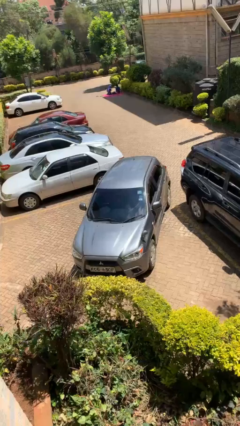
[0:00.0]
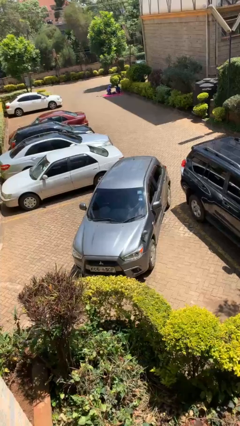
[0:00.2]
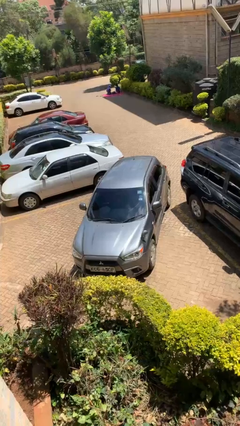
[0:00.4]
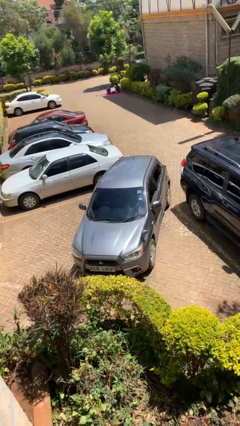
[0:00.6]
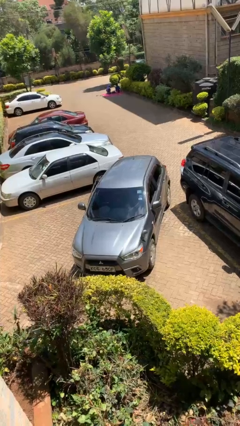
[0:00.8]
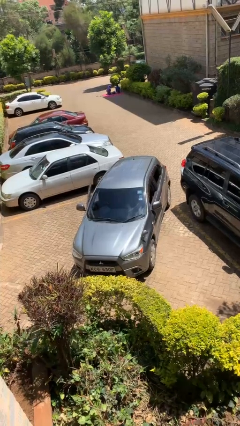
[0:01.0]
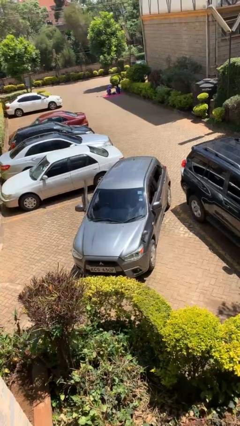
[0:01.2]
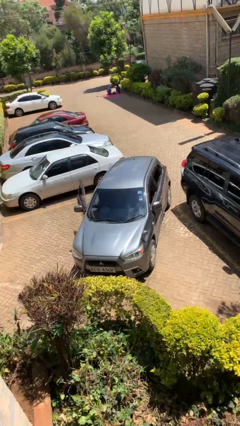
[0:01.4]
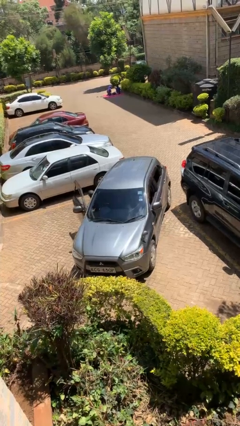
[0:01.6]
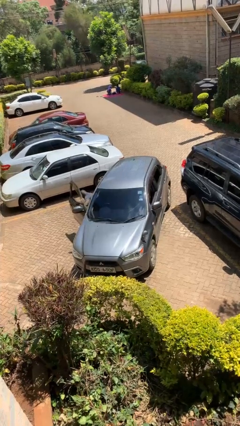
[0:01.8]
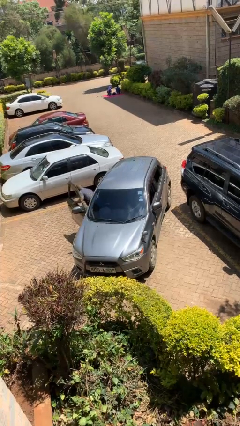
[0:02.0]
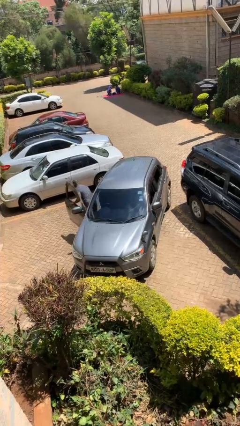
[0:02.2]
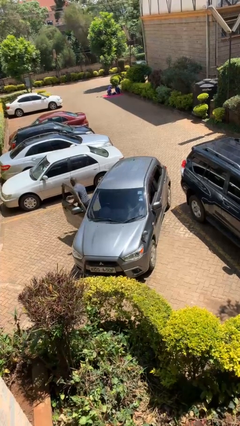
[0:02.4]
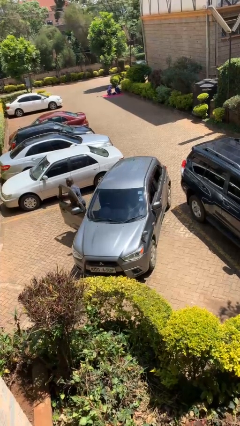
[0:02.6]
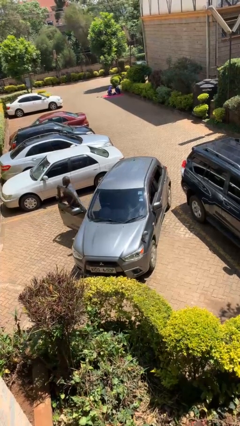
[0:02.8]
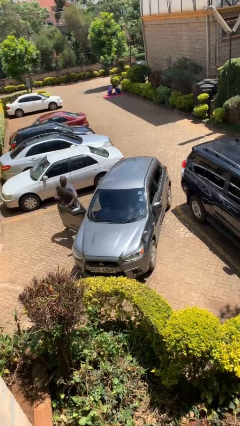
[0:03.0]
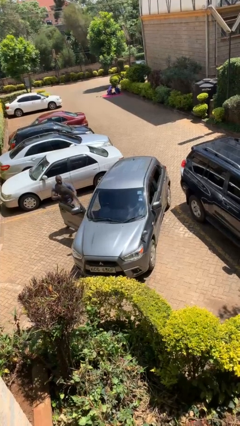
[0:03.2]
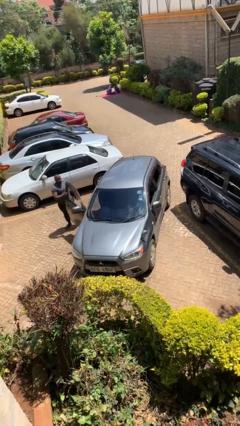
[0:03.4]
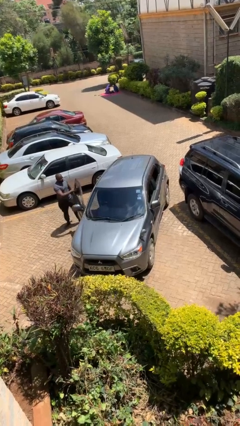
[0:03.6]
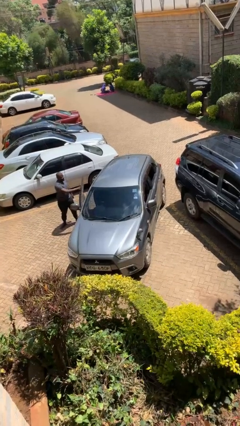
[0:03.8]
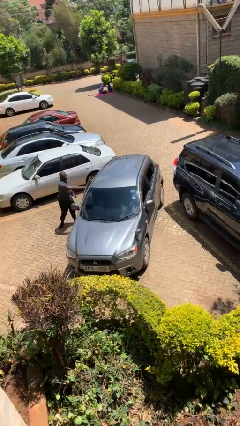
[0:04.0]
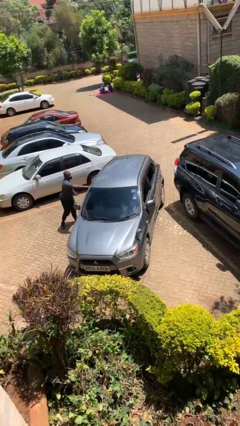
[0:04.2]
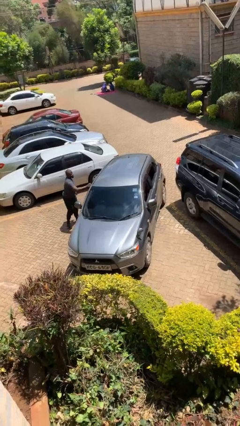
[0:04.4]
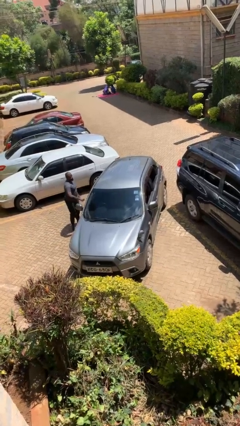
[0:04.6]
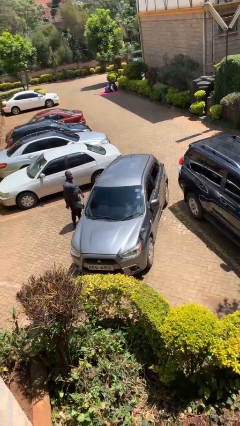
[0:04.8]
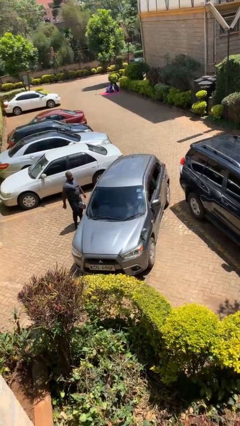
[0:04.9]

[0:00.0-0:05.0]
car drops off person

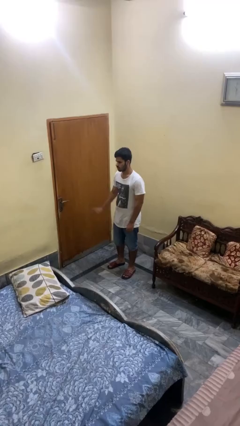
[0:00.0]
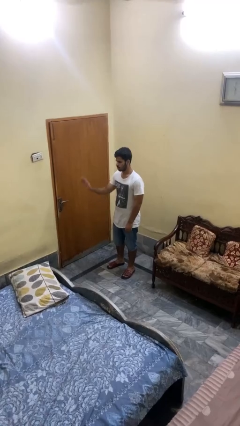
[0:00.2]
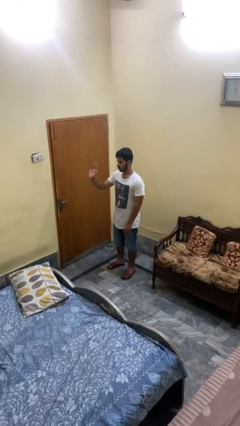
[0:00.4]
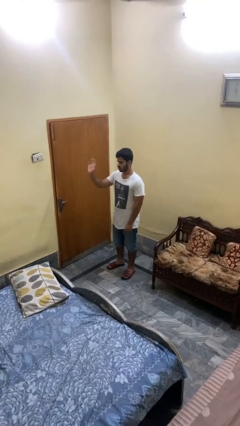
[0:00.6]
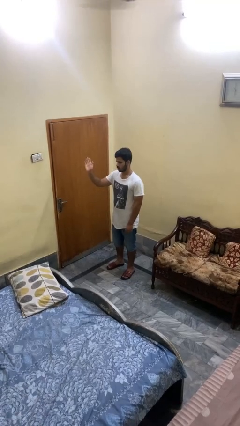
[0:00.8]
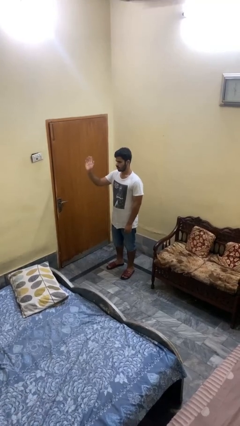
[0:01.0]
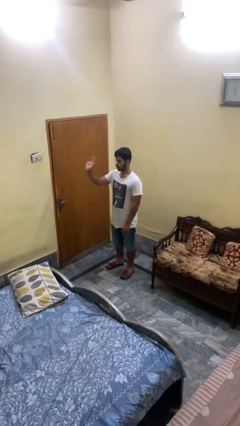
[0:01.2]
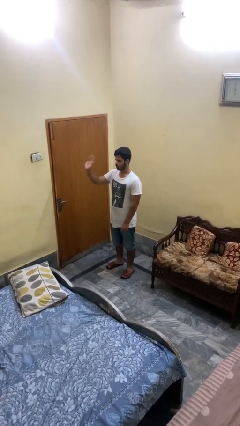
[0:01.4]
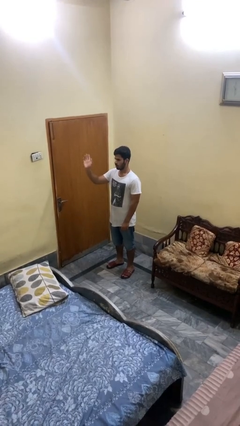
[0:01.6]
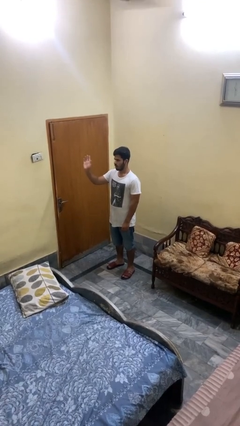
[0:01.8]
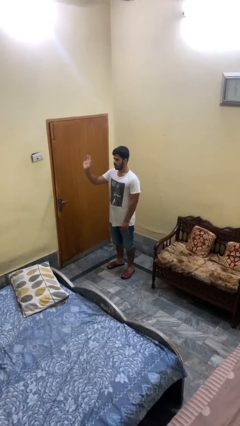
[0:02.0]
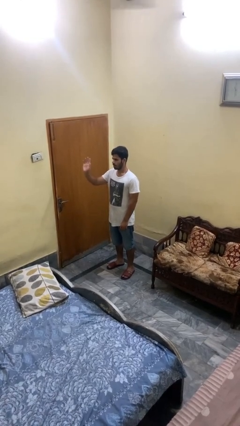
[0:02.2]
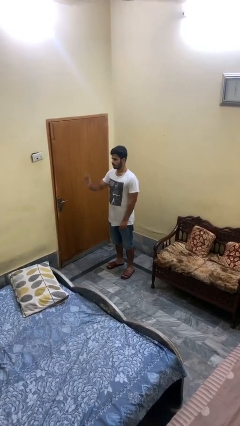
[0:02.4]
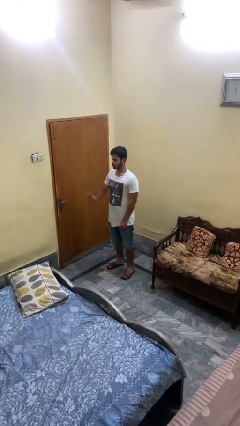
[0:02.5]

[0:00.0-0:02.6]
person waves at person

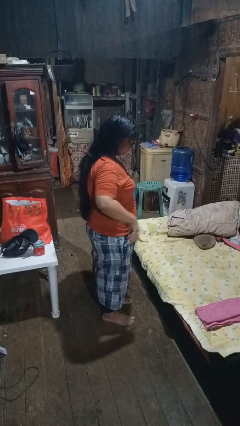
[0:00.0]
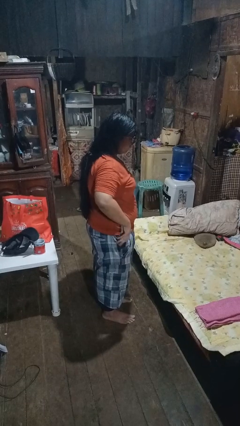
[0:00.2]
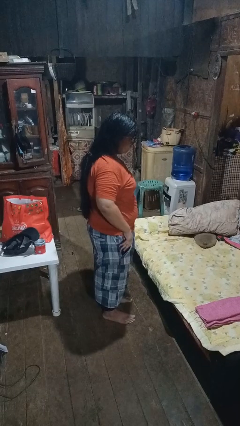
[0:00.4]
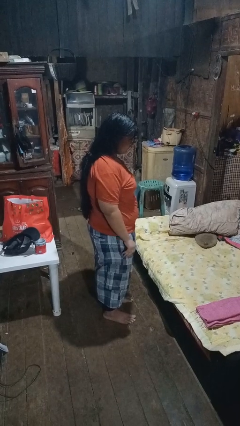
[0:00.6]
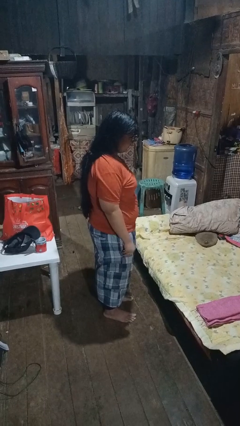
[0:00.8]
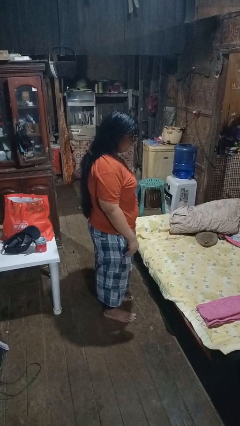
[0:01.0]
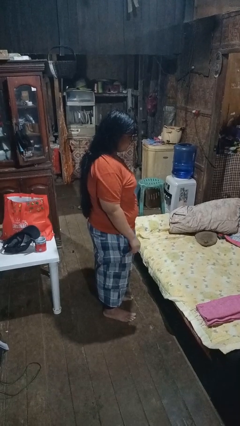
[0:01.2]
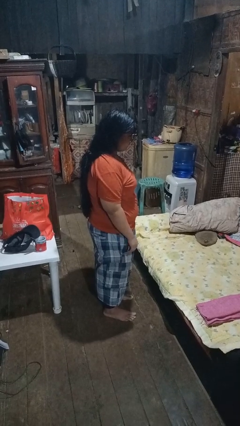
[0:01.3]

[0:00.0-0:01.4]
person puts phone into pocket

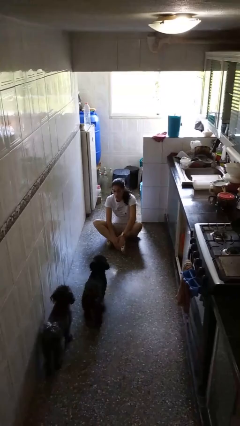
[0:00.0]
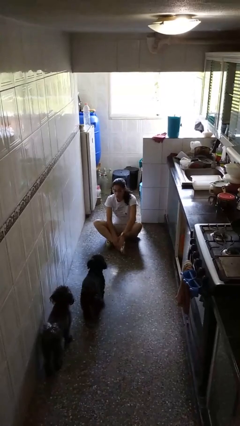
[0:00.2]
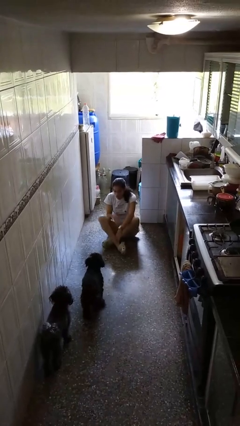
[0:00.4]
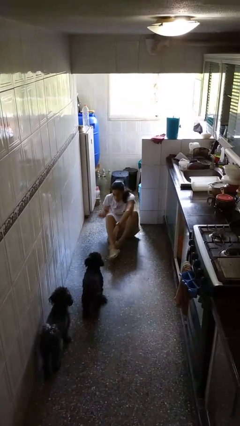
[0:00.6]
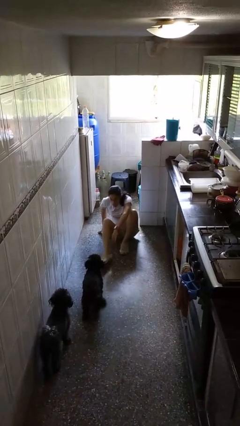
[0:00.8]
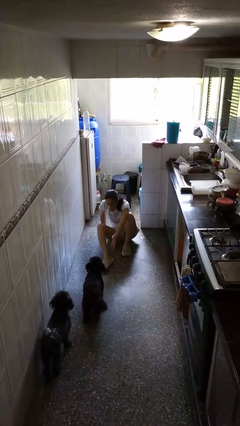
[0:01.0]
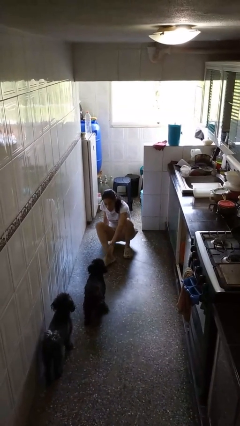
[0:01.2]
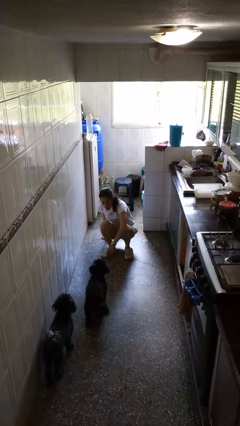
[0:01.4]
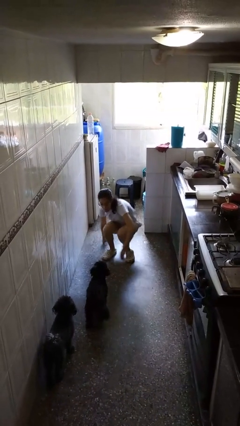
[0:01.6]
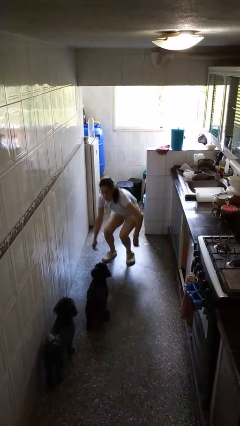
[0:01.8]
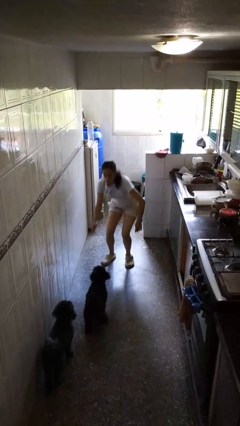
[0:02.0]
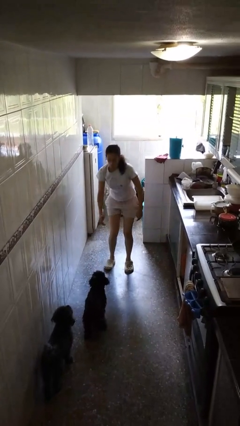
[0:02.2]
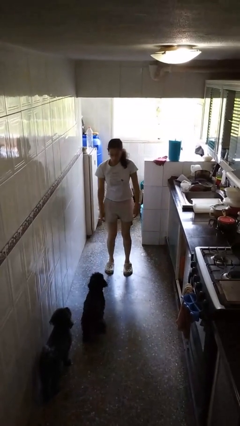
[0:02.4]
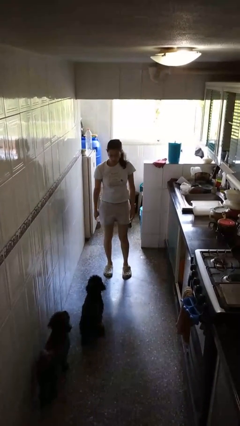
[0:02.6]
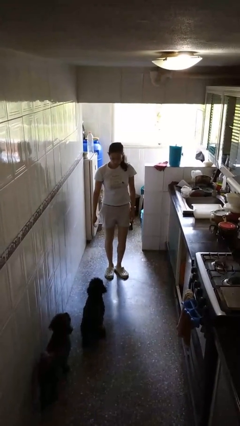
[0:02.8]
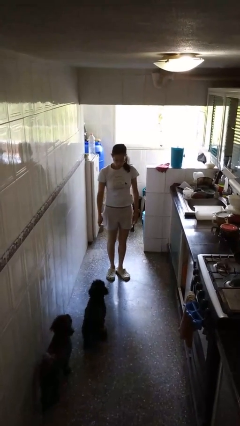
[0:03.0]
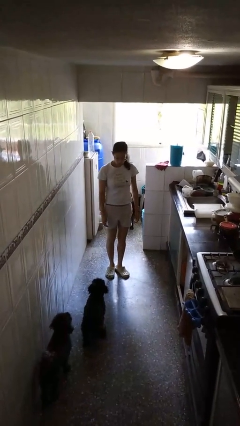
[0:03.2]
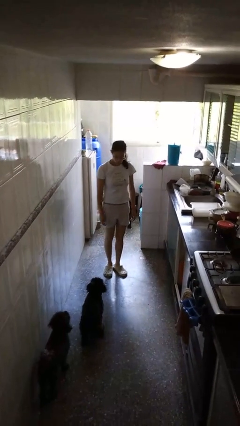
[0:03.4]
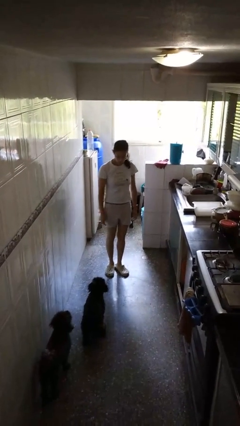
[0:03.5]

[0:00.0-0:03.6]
person stands up from floor

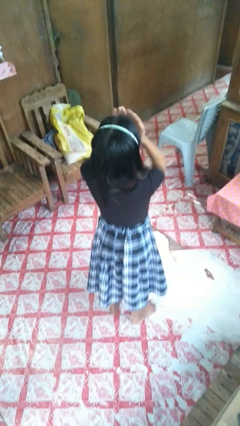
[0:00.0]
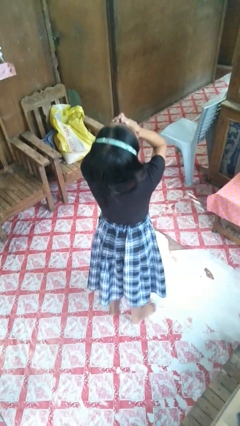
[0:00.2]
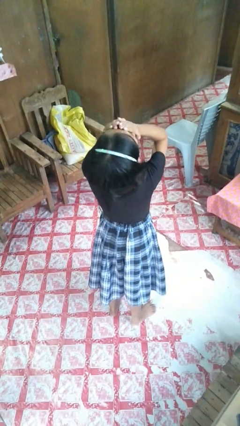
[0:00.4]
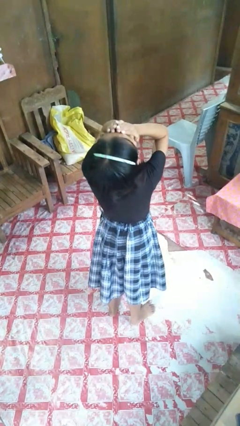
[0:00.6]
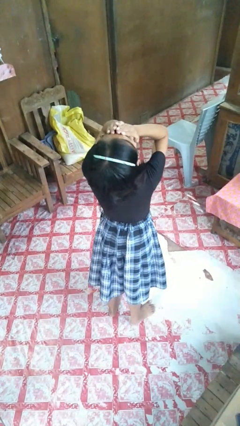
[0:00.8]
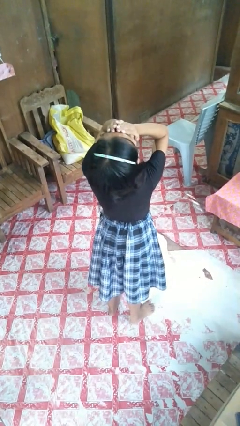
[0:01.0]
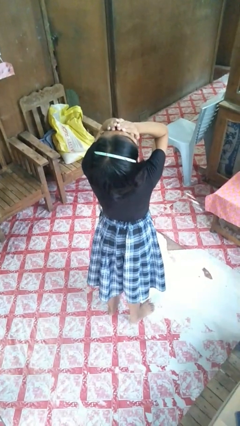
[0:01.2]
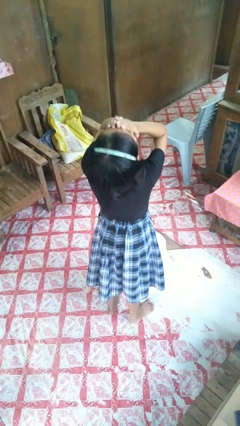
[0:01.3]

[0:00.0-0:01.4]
person covers face with hands

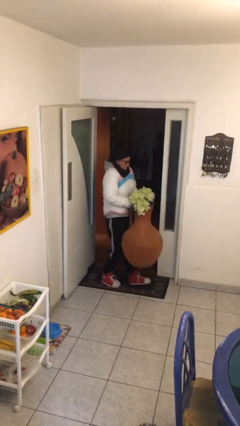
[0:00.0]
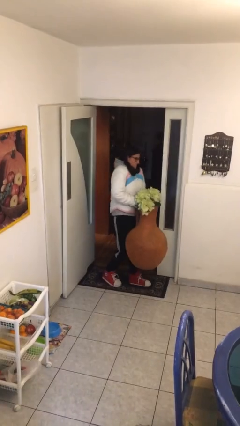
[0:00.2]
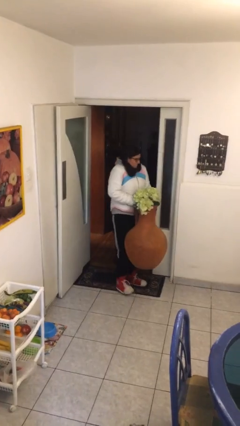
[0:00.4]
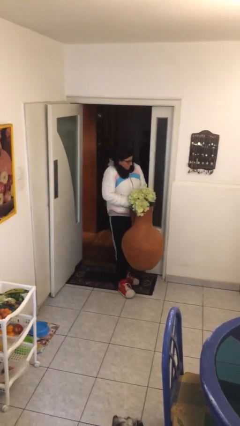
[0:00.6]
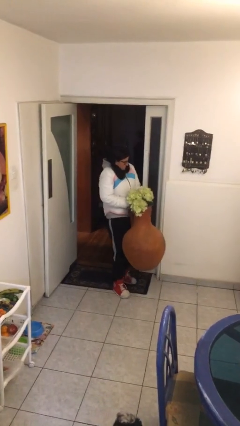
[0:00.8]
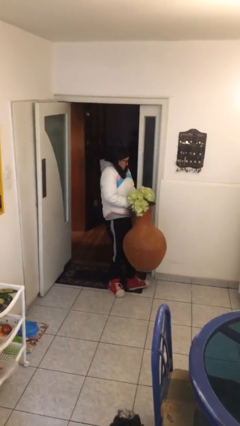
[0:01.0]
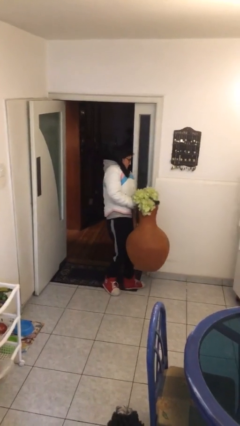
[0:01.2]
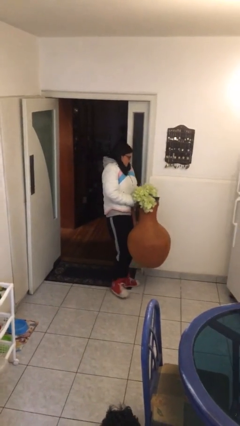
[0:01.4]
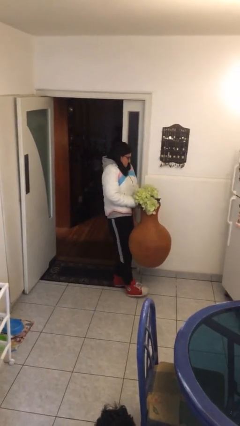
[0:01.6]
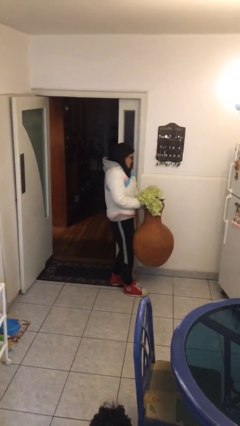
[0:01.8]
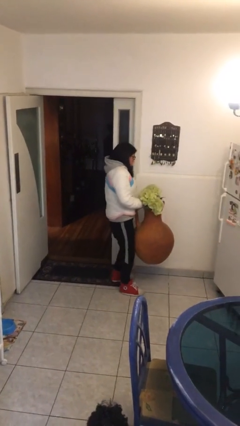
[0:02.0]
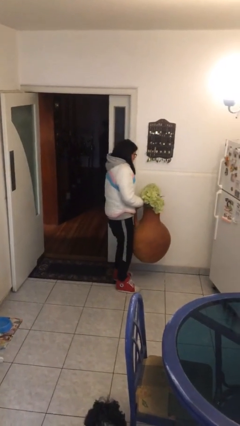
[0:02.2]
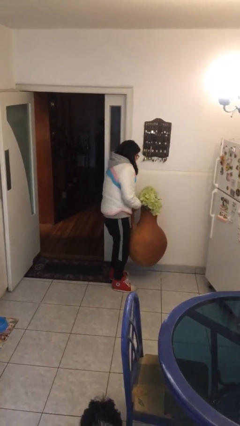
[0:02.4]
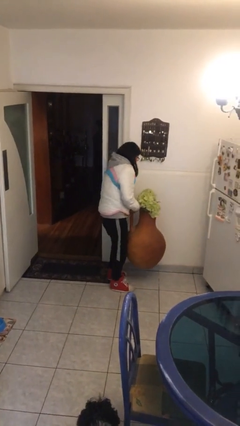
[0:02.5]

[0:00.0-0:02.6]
person carries heavy object

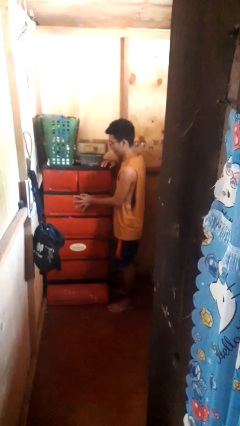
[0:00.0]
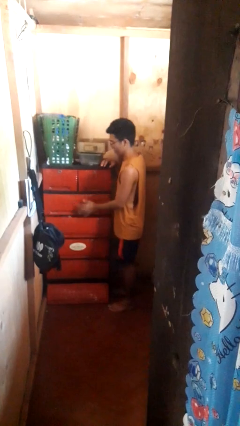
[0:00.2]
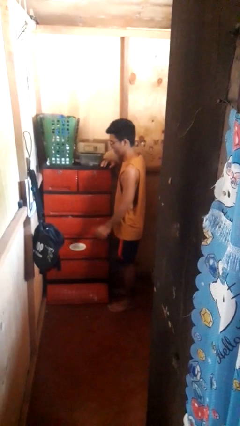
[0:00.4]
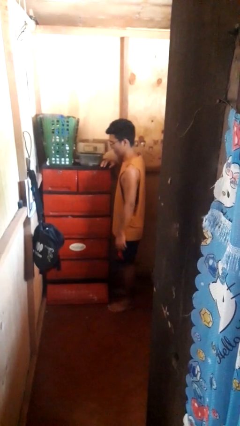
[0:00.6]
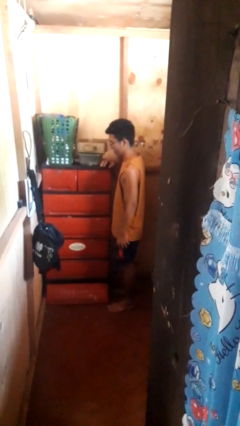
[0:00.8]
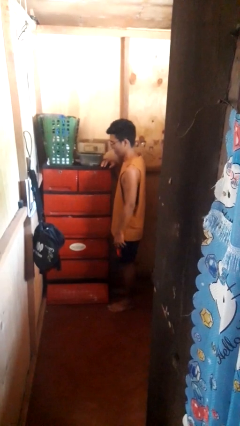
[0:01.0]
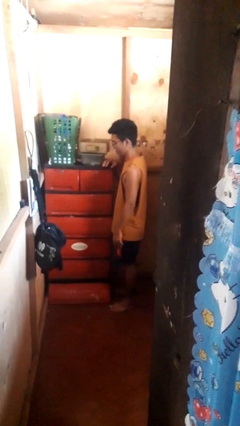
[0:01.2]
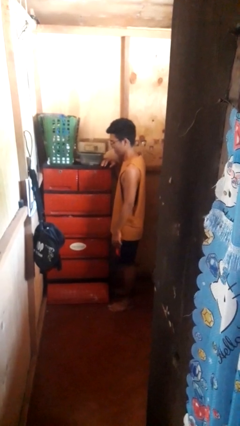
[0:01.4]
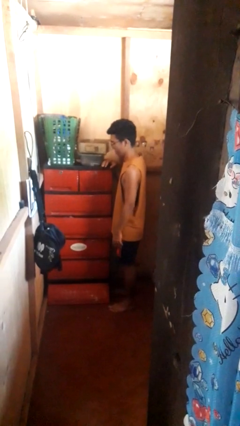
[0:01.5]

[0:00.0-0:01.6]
person closes dresser drawer
